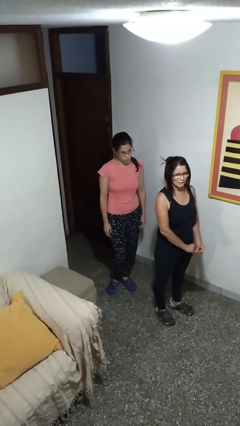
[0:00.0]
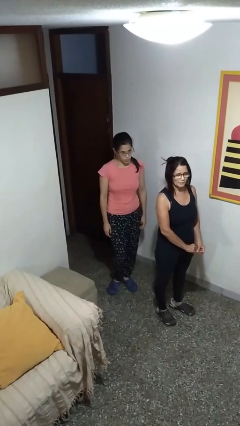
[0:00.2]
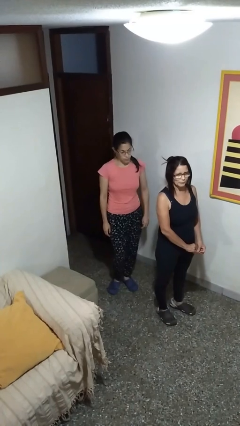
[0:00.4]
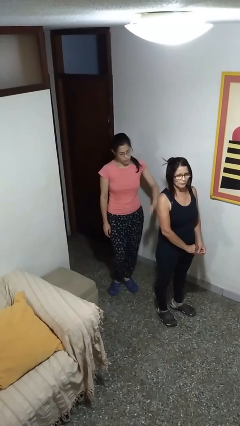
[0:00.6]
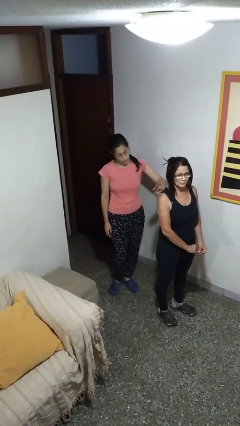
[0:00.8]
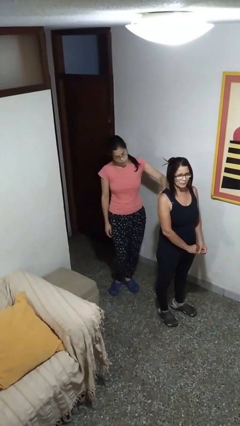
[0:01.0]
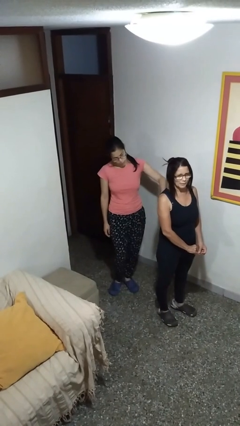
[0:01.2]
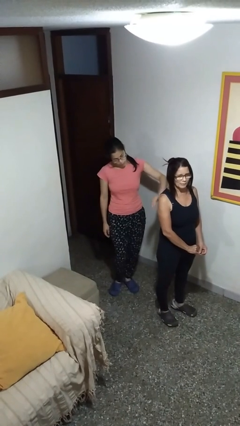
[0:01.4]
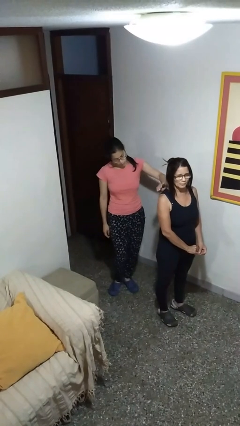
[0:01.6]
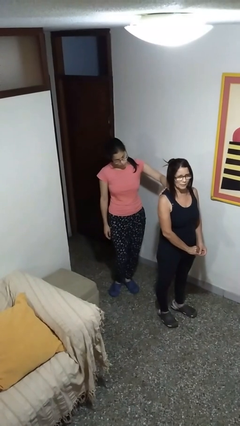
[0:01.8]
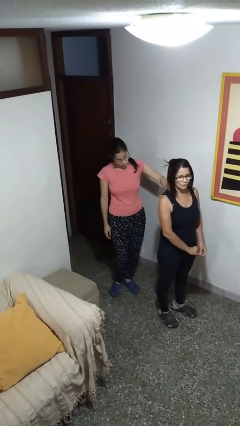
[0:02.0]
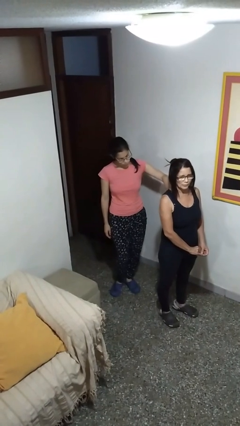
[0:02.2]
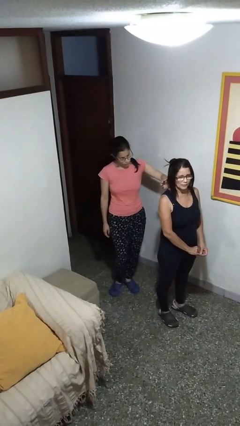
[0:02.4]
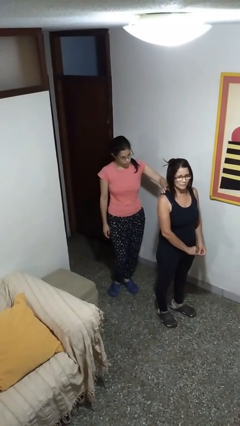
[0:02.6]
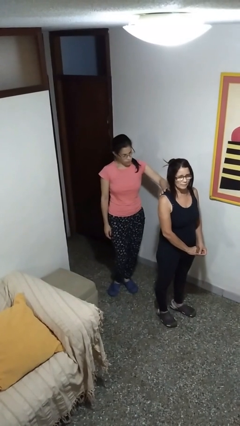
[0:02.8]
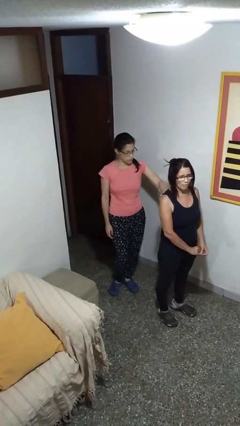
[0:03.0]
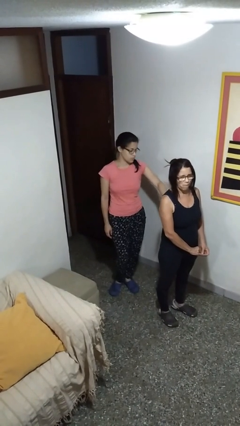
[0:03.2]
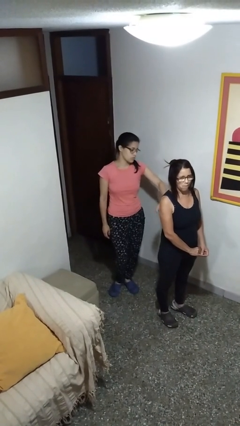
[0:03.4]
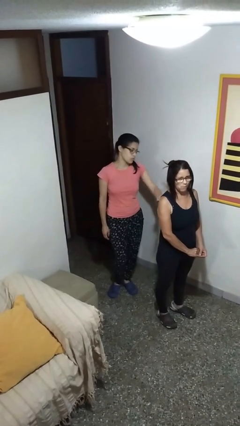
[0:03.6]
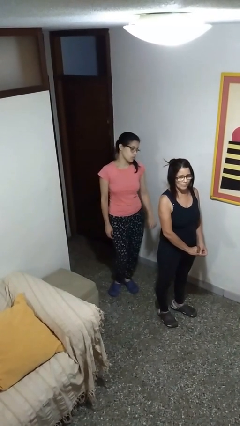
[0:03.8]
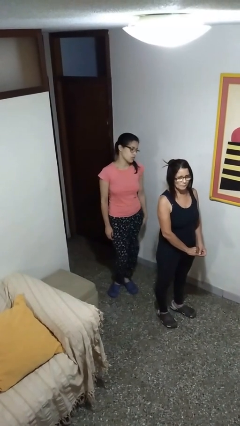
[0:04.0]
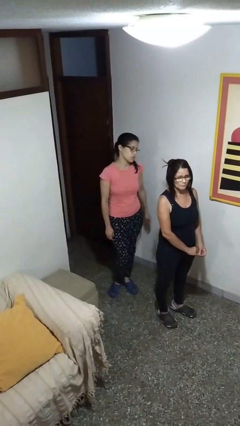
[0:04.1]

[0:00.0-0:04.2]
person touches back of person

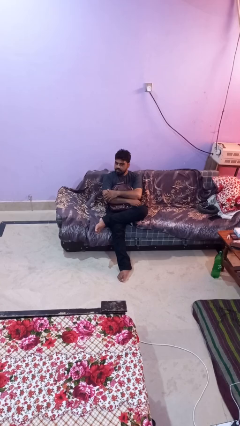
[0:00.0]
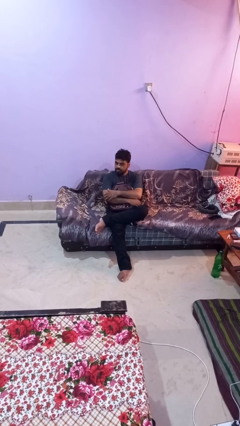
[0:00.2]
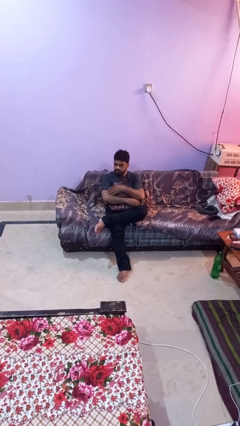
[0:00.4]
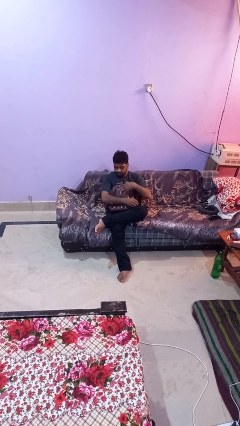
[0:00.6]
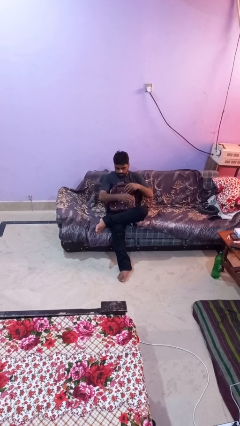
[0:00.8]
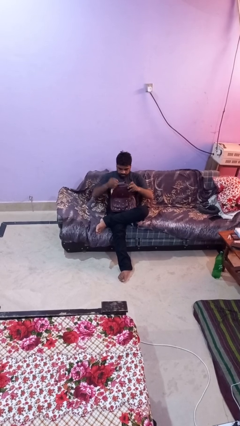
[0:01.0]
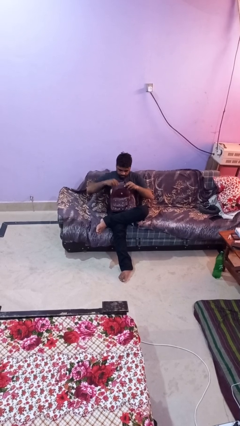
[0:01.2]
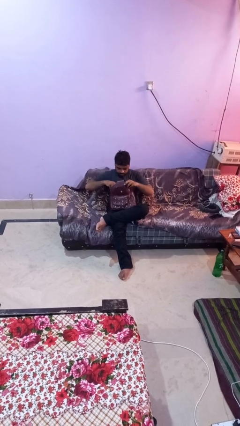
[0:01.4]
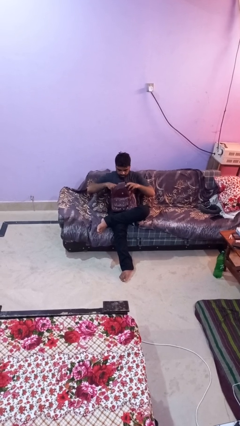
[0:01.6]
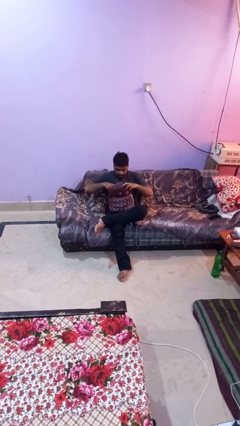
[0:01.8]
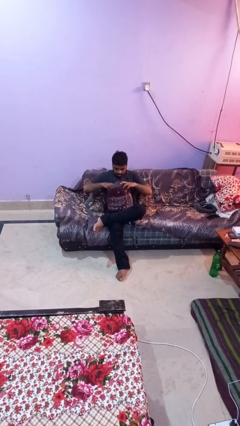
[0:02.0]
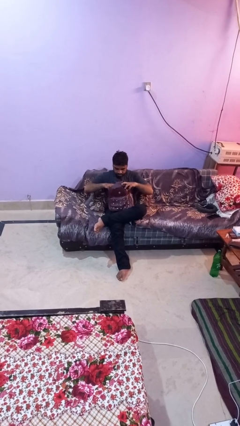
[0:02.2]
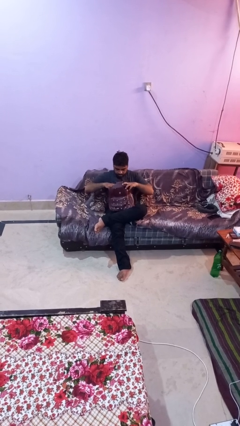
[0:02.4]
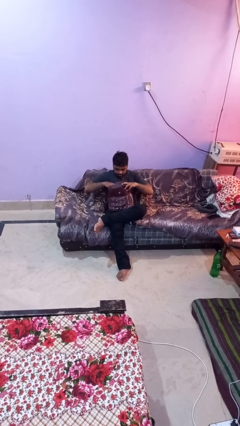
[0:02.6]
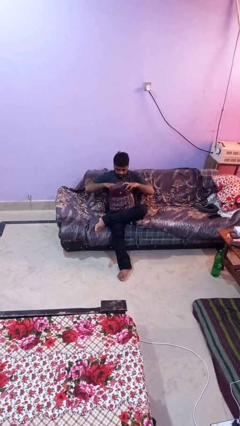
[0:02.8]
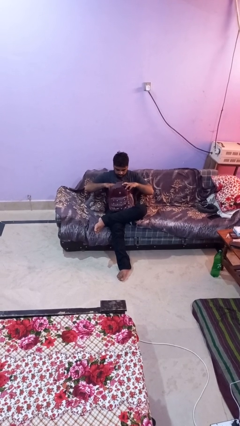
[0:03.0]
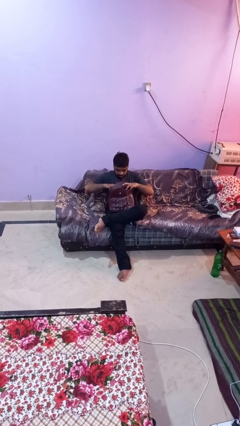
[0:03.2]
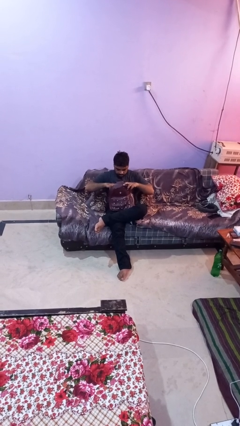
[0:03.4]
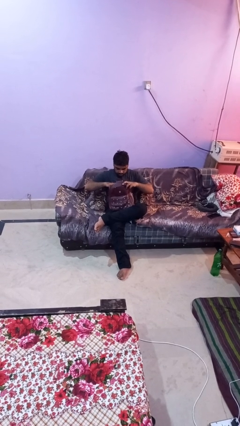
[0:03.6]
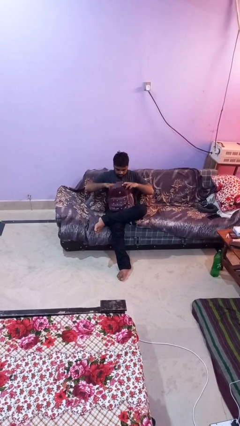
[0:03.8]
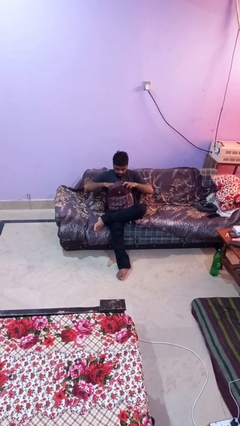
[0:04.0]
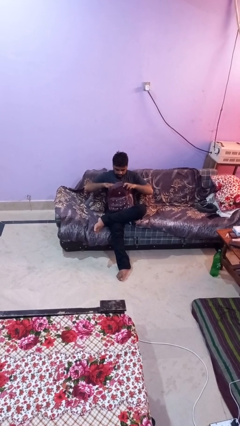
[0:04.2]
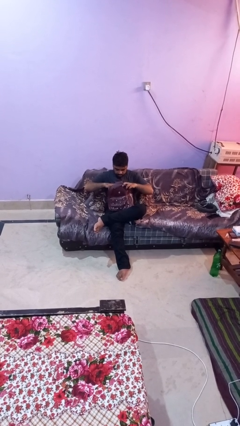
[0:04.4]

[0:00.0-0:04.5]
person searches in backpack

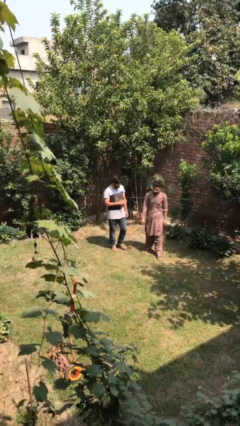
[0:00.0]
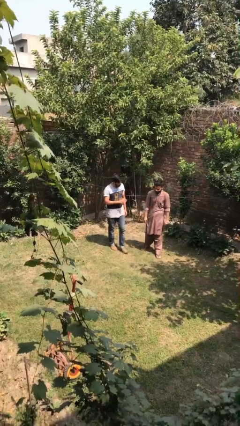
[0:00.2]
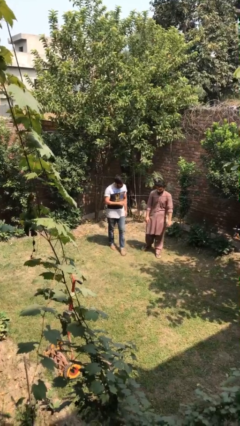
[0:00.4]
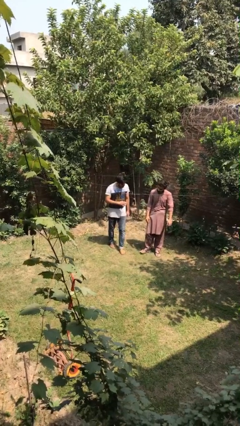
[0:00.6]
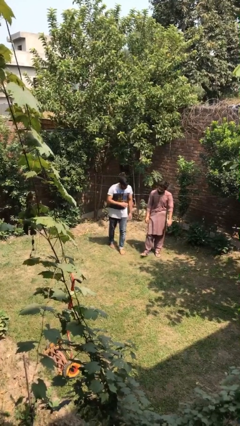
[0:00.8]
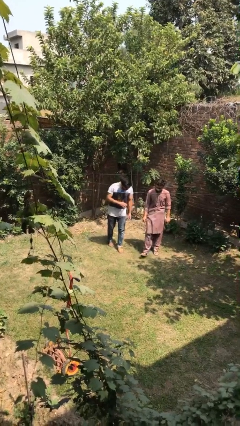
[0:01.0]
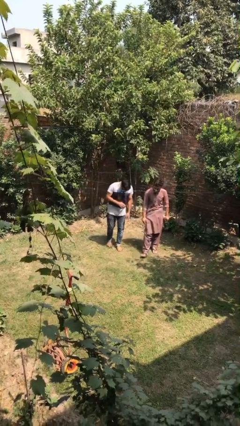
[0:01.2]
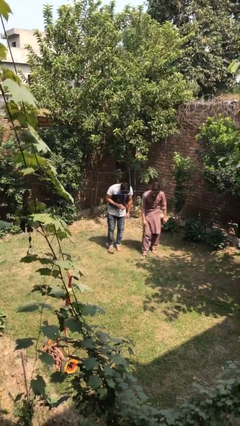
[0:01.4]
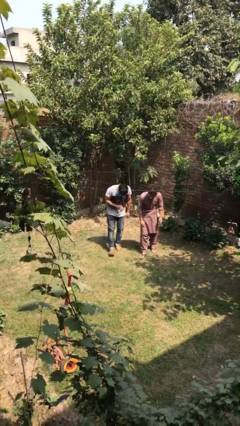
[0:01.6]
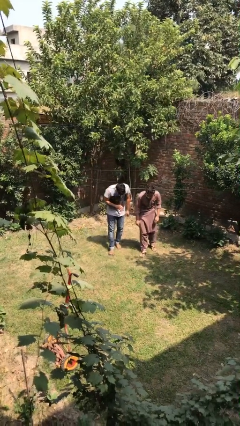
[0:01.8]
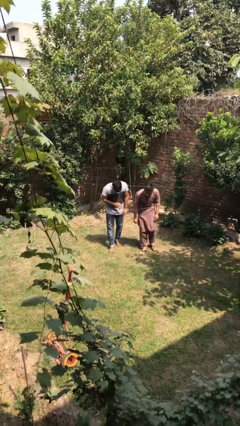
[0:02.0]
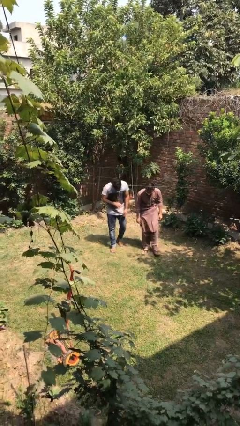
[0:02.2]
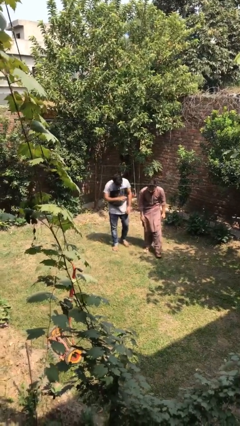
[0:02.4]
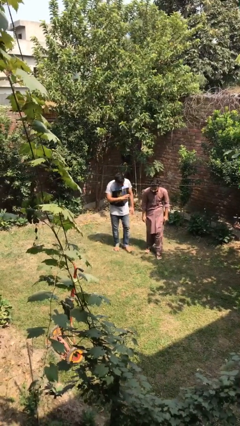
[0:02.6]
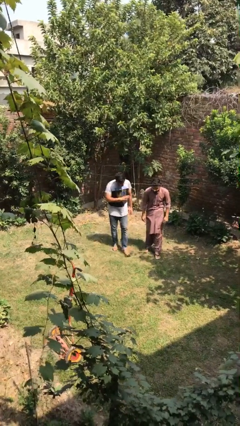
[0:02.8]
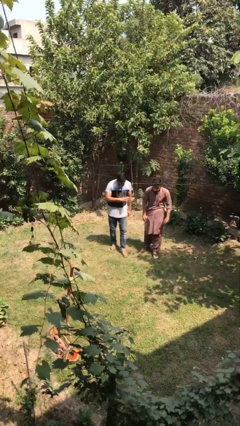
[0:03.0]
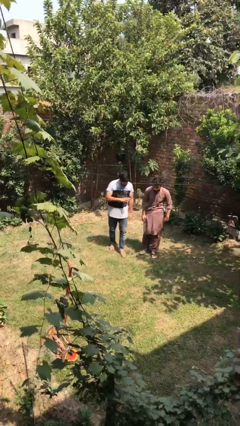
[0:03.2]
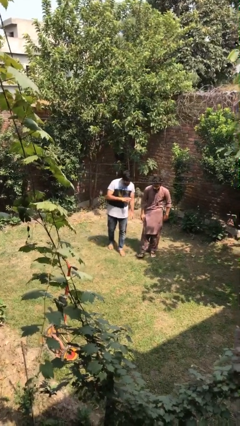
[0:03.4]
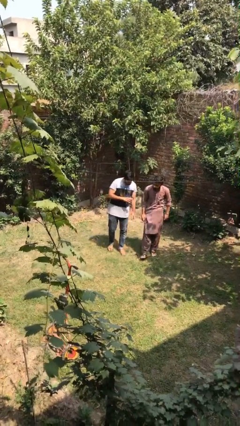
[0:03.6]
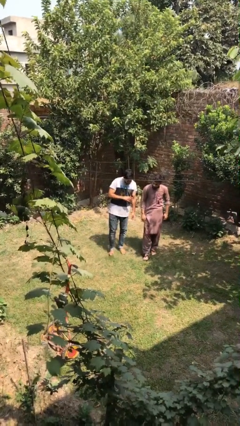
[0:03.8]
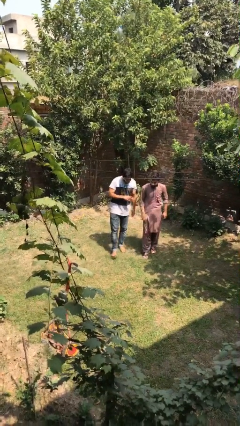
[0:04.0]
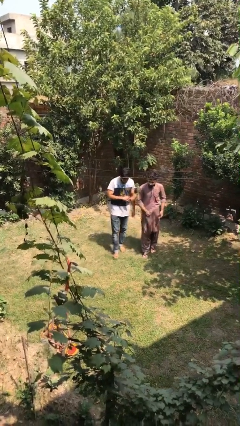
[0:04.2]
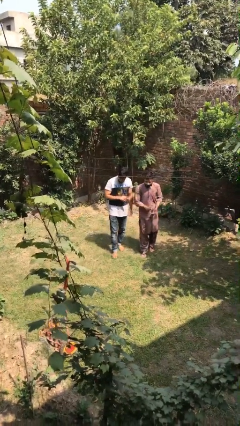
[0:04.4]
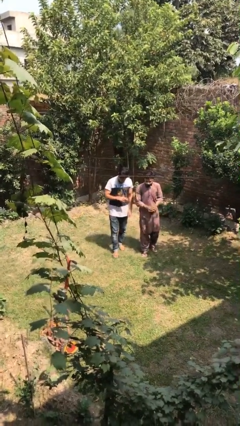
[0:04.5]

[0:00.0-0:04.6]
person talks to person

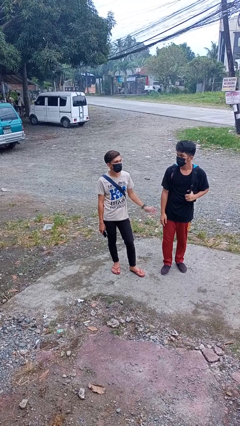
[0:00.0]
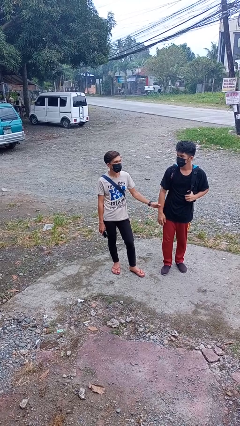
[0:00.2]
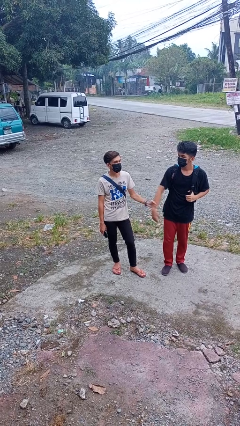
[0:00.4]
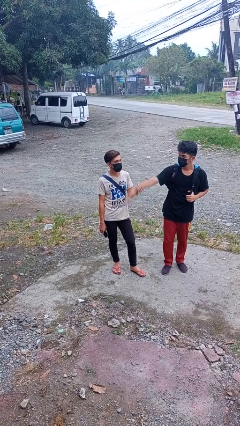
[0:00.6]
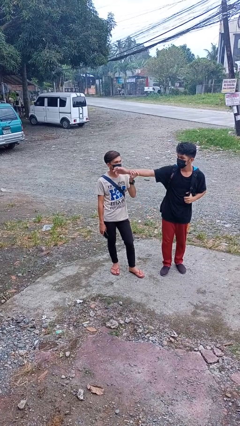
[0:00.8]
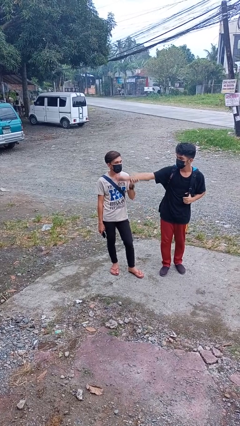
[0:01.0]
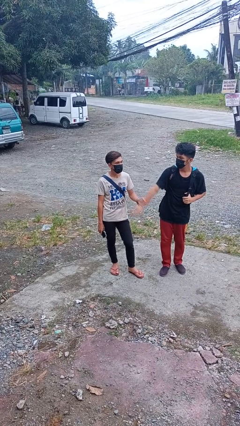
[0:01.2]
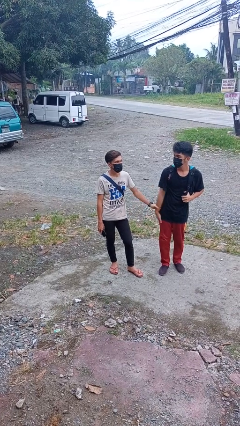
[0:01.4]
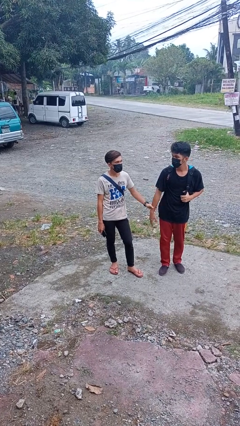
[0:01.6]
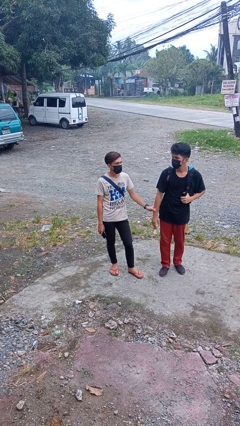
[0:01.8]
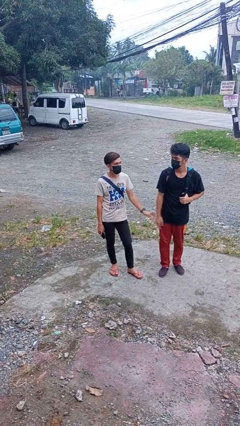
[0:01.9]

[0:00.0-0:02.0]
person grabs person by forearm

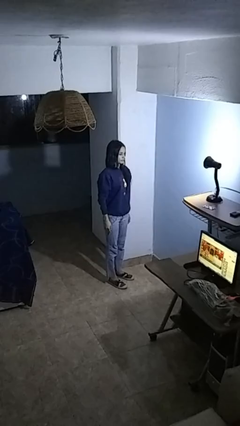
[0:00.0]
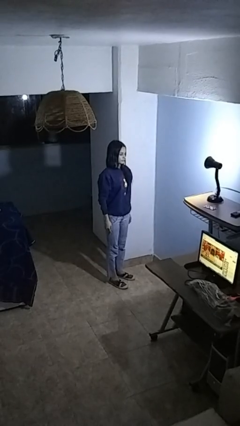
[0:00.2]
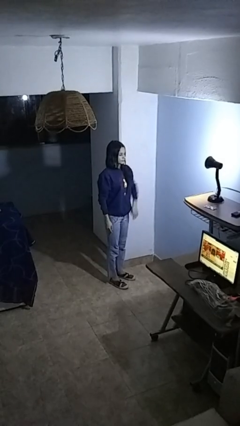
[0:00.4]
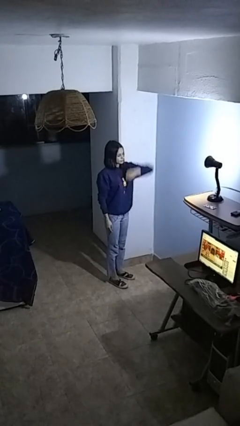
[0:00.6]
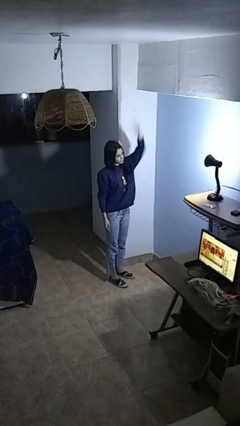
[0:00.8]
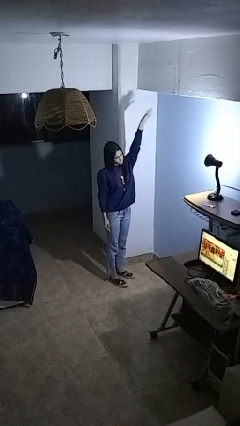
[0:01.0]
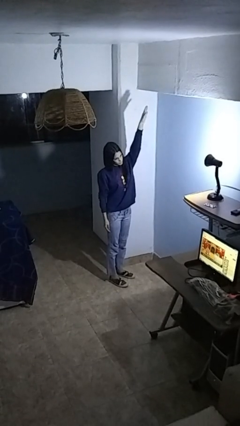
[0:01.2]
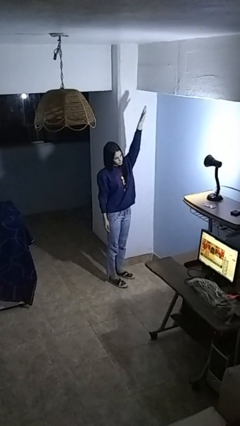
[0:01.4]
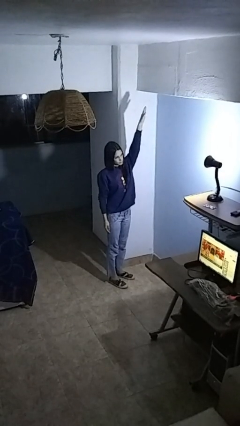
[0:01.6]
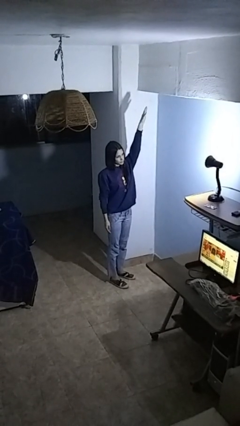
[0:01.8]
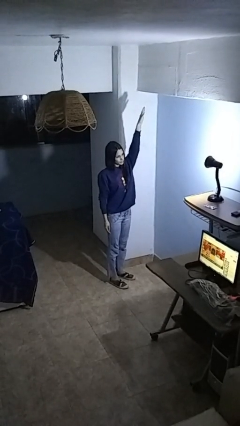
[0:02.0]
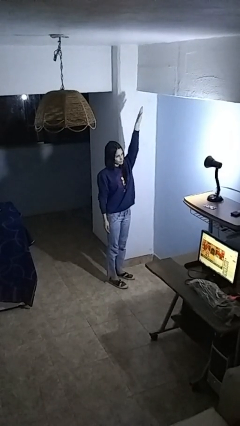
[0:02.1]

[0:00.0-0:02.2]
person gestures swipe up
